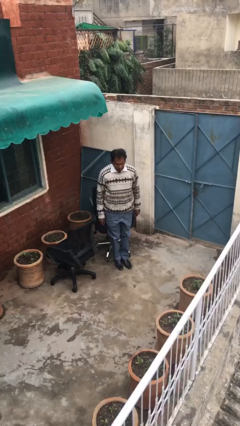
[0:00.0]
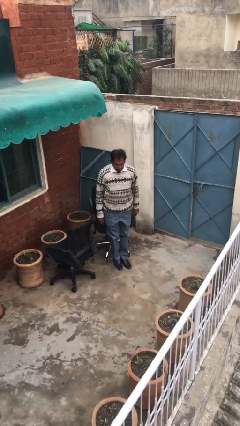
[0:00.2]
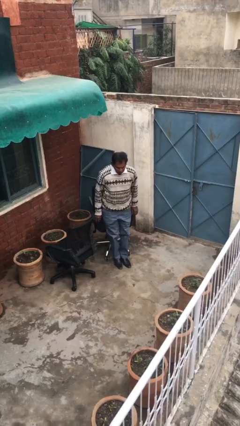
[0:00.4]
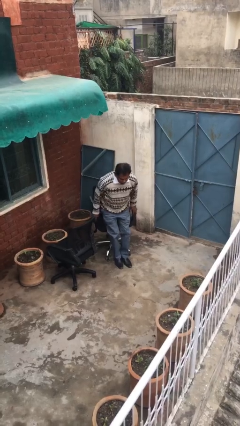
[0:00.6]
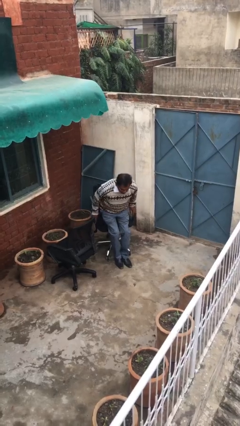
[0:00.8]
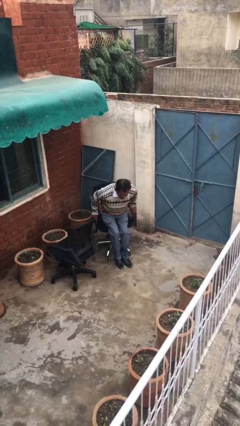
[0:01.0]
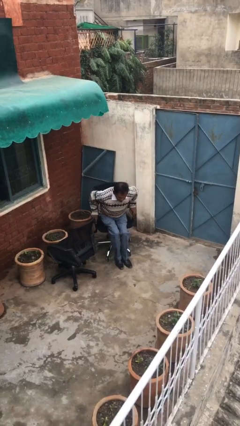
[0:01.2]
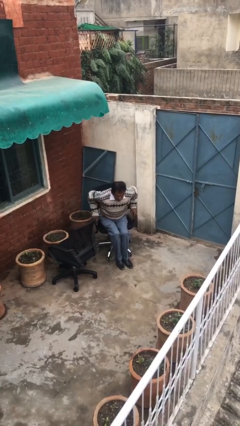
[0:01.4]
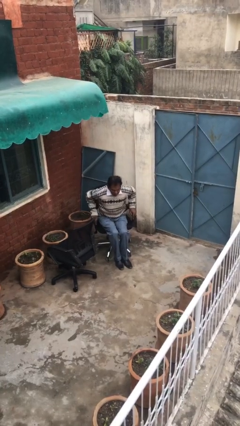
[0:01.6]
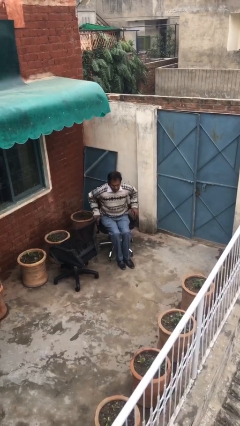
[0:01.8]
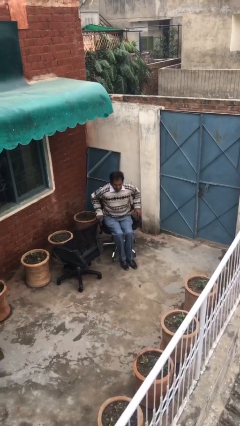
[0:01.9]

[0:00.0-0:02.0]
person sits down

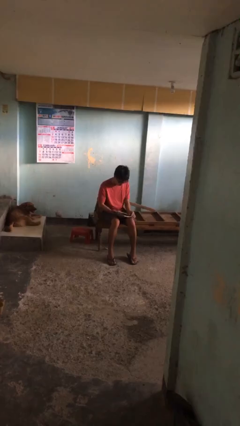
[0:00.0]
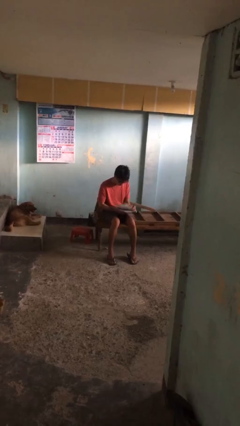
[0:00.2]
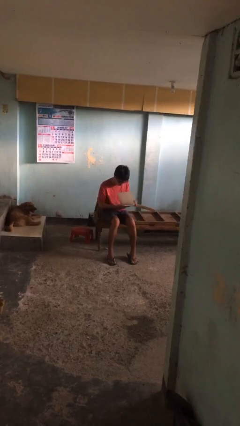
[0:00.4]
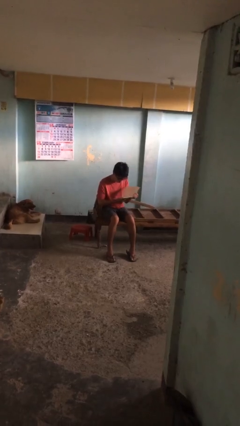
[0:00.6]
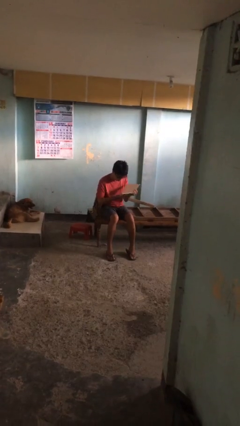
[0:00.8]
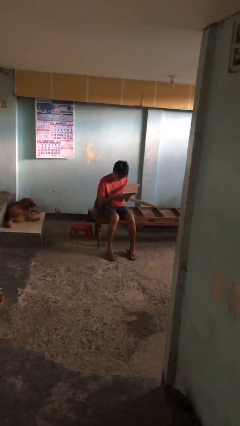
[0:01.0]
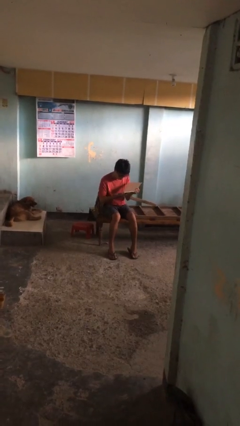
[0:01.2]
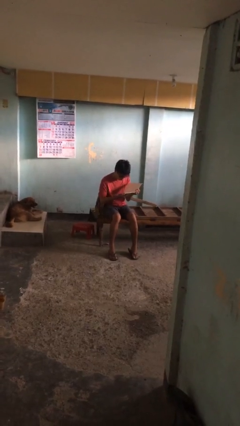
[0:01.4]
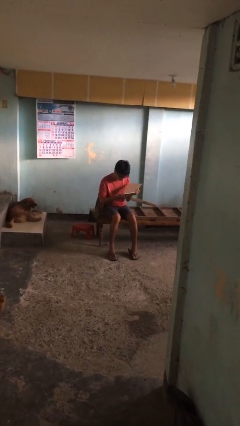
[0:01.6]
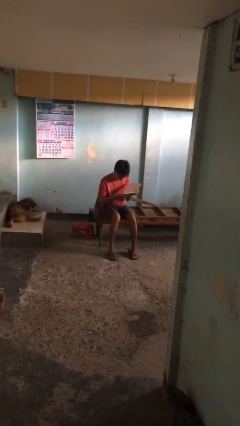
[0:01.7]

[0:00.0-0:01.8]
person reads document

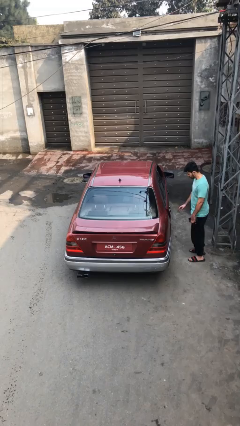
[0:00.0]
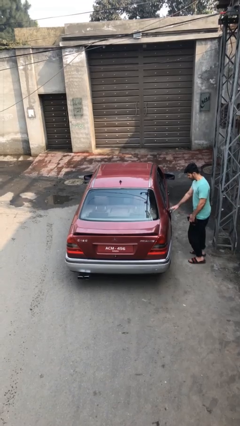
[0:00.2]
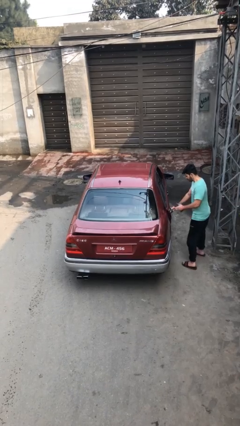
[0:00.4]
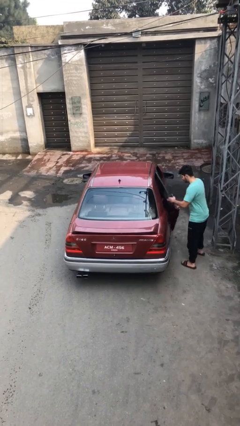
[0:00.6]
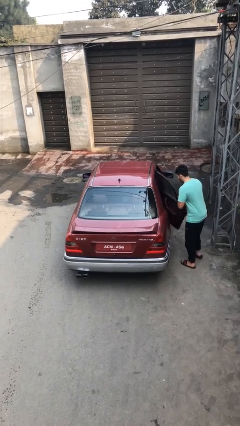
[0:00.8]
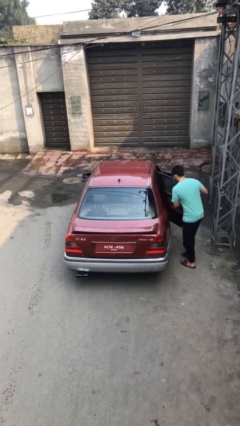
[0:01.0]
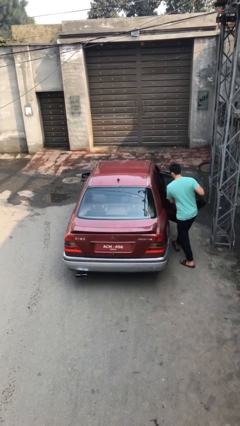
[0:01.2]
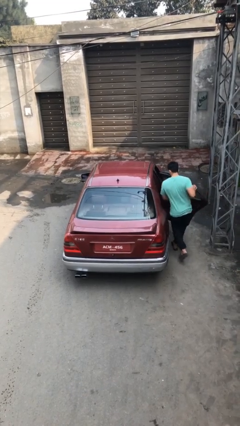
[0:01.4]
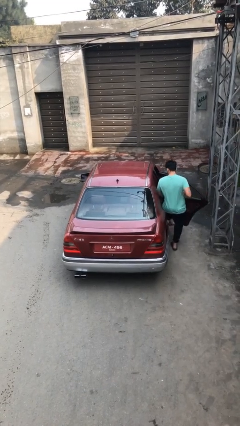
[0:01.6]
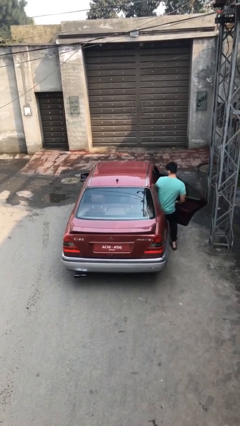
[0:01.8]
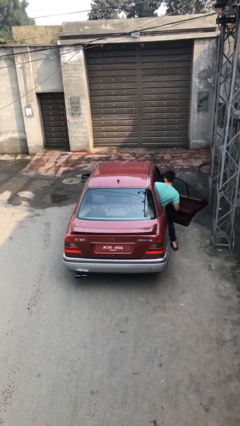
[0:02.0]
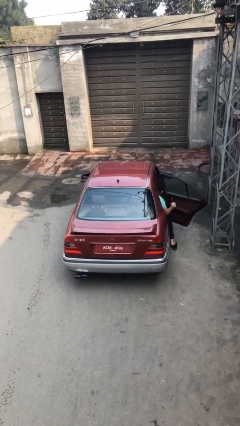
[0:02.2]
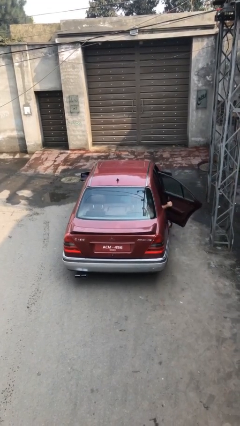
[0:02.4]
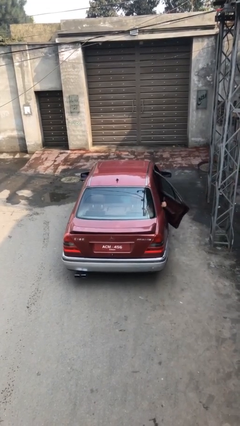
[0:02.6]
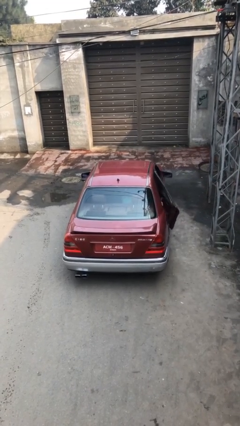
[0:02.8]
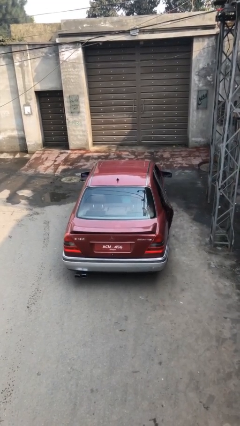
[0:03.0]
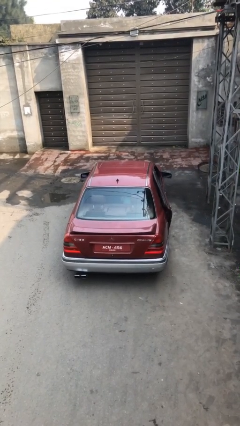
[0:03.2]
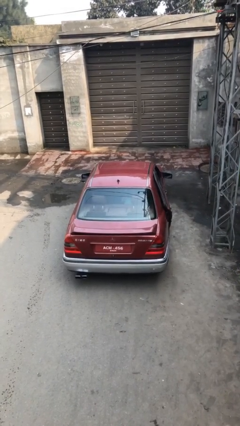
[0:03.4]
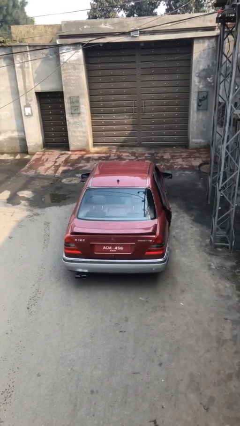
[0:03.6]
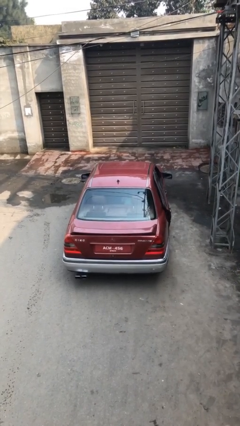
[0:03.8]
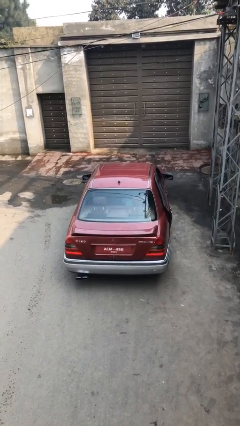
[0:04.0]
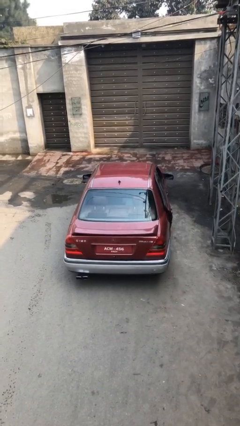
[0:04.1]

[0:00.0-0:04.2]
car picks up person

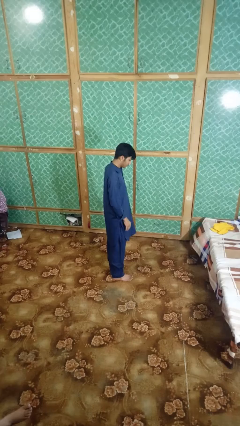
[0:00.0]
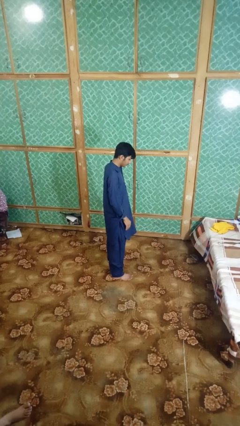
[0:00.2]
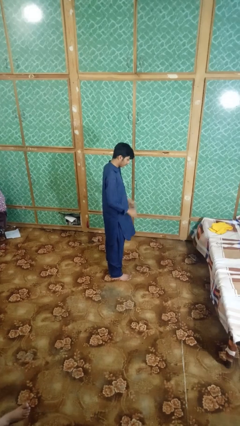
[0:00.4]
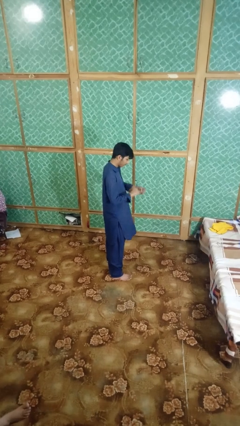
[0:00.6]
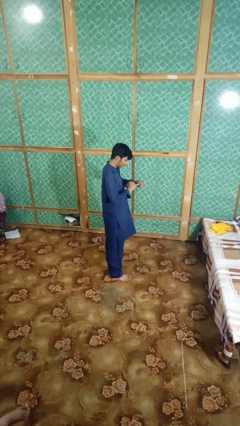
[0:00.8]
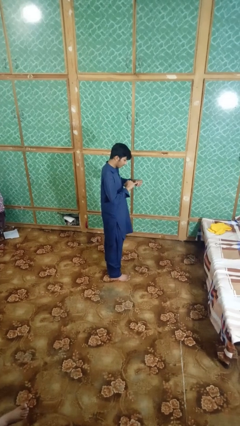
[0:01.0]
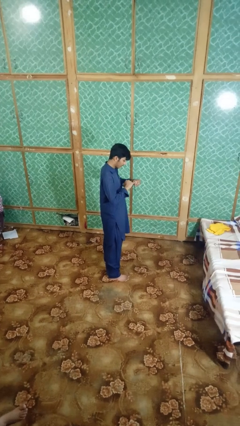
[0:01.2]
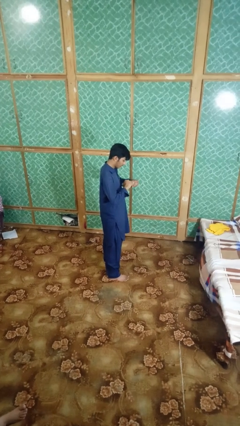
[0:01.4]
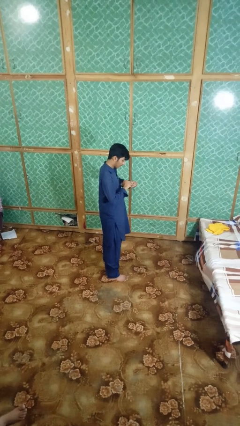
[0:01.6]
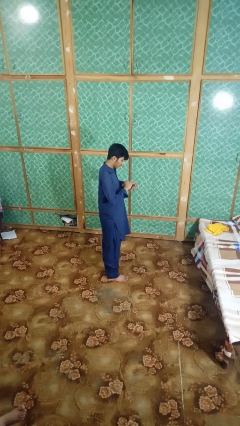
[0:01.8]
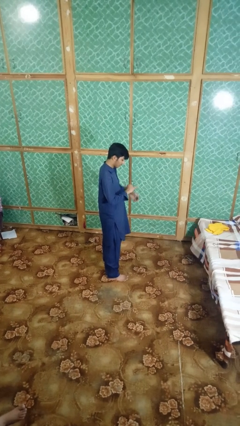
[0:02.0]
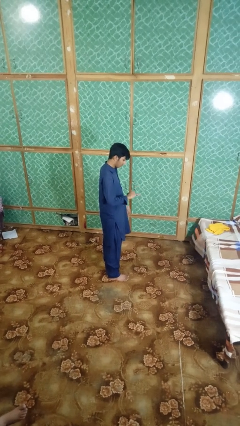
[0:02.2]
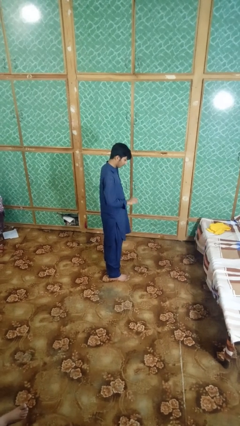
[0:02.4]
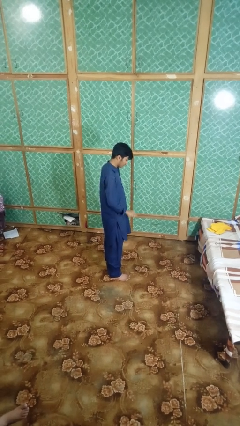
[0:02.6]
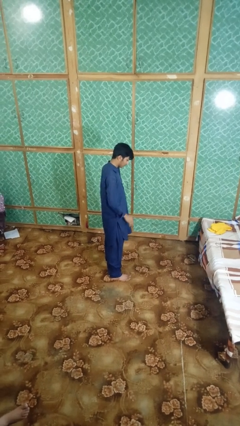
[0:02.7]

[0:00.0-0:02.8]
person puts on ring

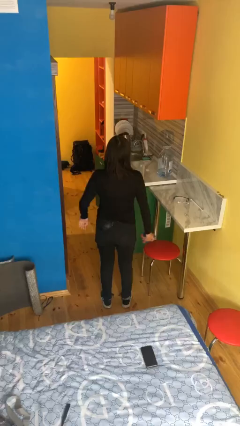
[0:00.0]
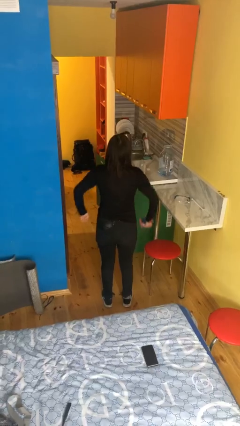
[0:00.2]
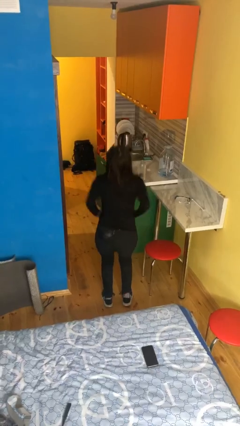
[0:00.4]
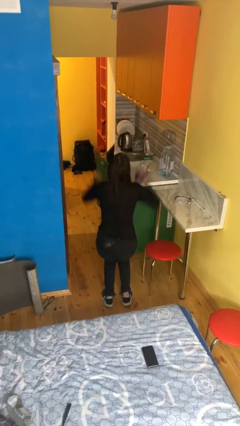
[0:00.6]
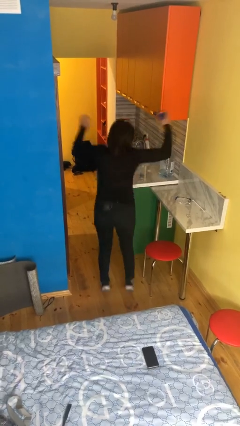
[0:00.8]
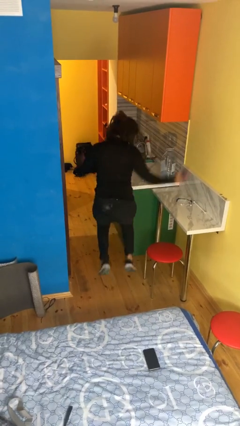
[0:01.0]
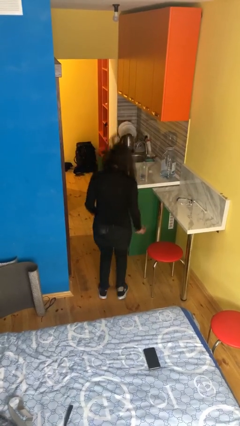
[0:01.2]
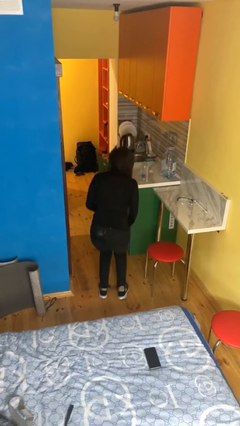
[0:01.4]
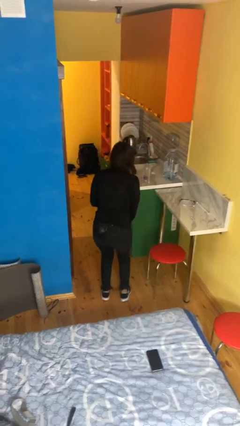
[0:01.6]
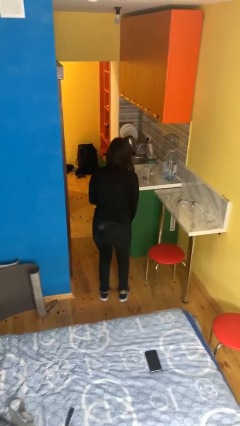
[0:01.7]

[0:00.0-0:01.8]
person jumps

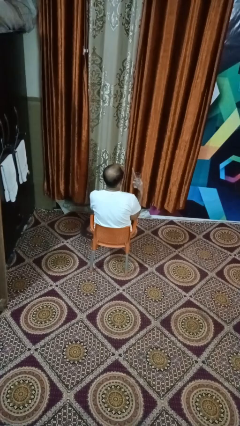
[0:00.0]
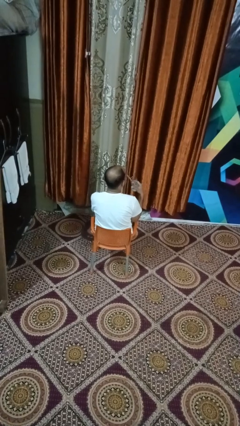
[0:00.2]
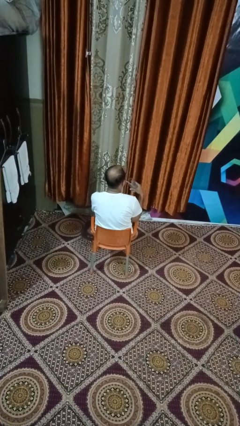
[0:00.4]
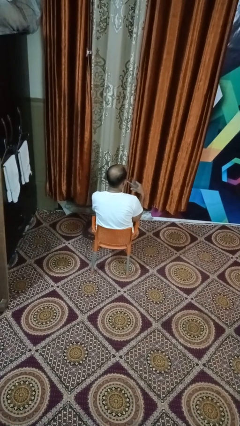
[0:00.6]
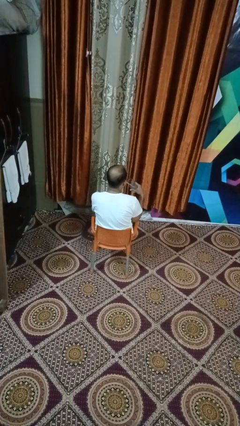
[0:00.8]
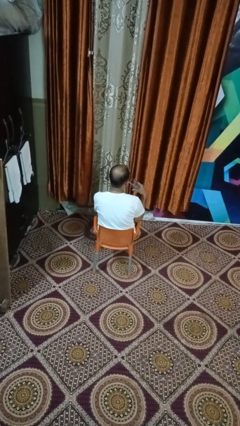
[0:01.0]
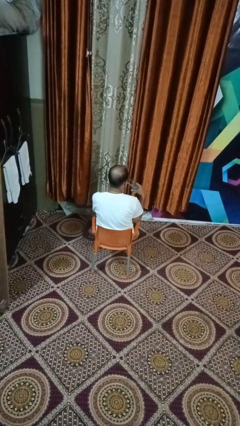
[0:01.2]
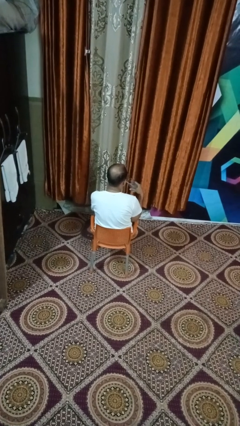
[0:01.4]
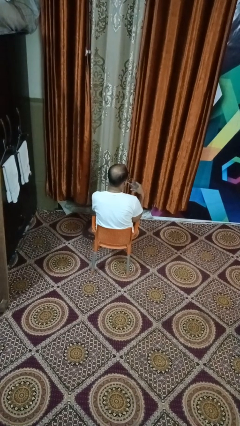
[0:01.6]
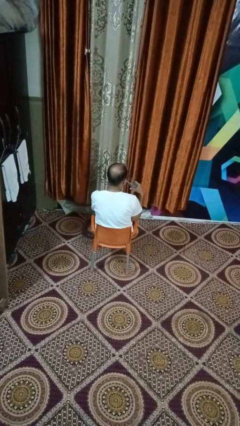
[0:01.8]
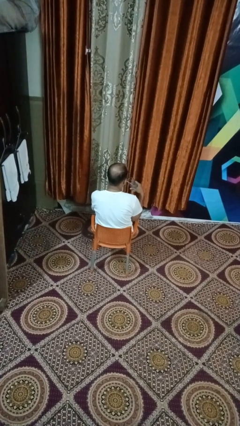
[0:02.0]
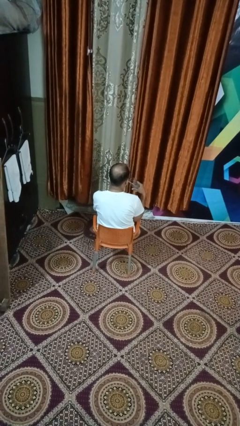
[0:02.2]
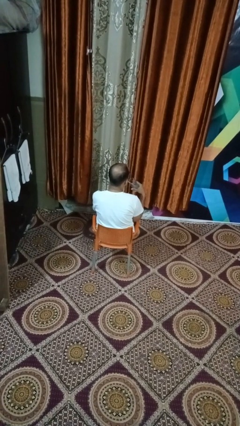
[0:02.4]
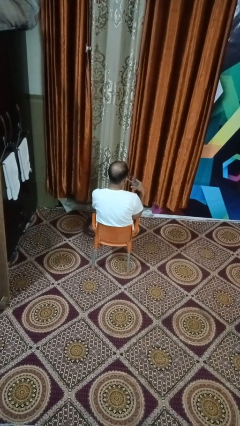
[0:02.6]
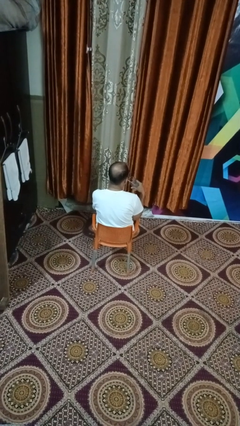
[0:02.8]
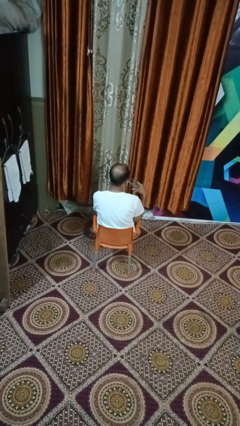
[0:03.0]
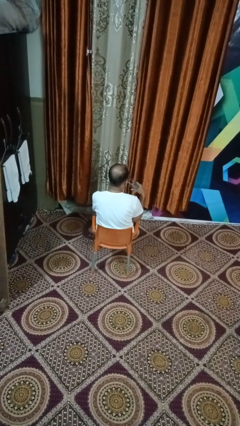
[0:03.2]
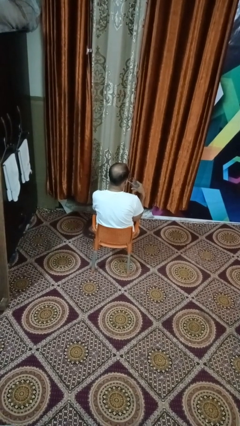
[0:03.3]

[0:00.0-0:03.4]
person drinks from straw

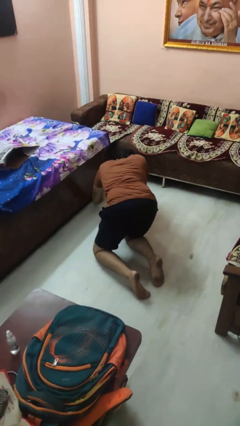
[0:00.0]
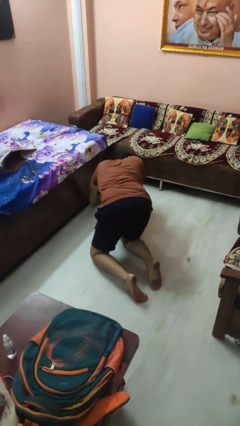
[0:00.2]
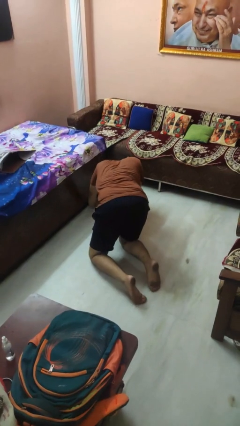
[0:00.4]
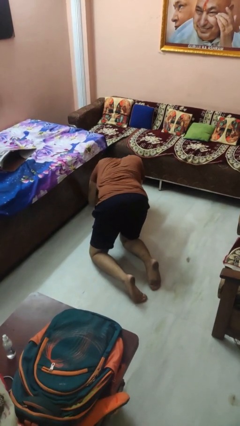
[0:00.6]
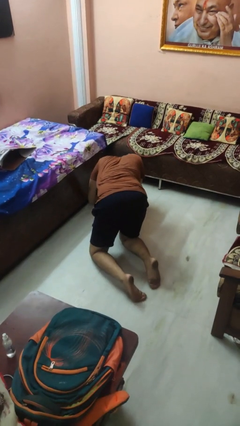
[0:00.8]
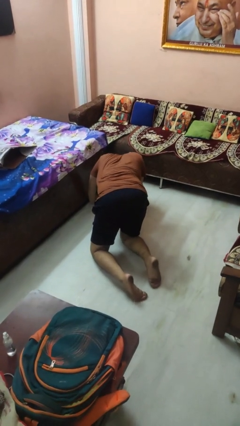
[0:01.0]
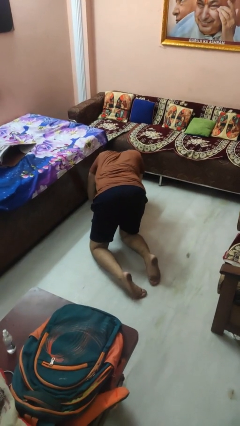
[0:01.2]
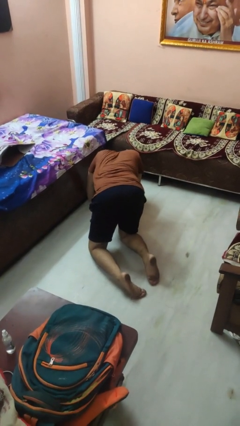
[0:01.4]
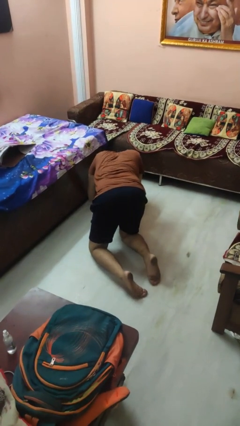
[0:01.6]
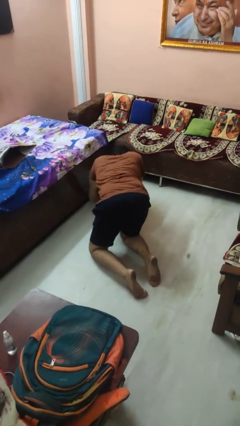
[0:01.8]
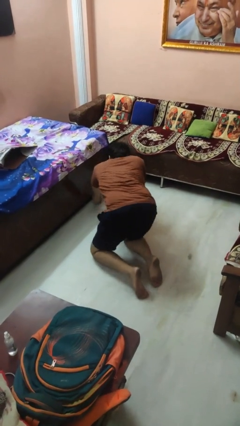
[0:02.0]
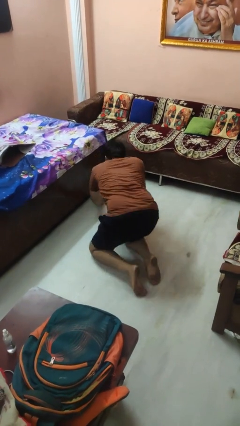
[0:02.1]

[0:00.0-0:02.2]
person searches under bed
